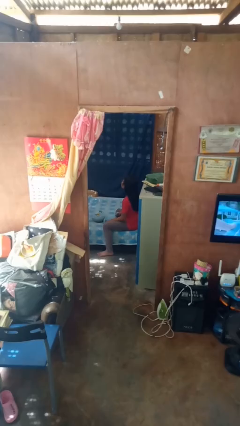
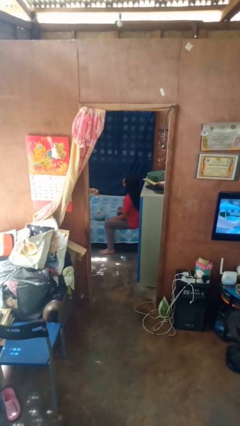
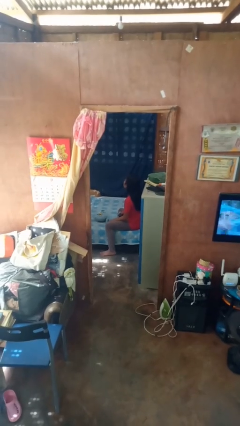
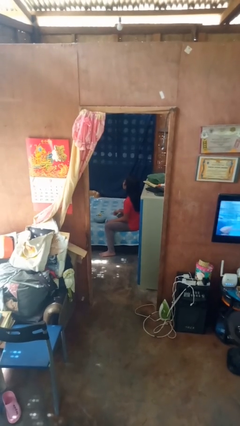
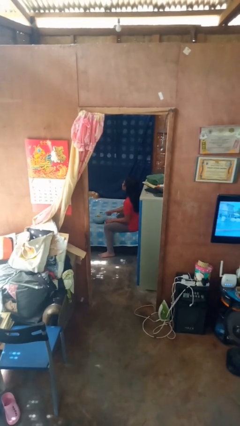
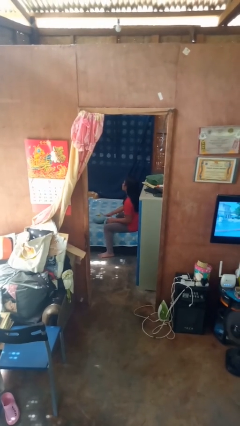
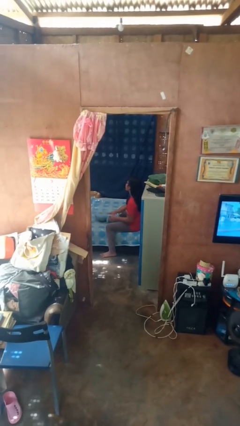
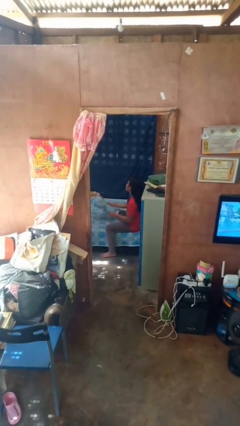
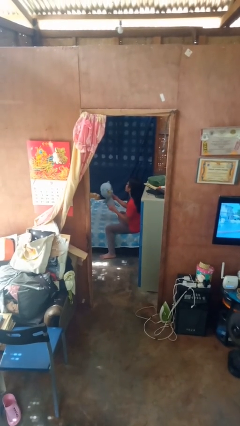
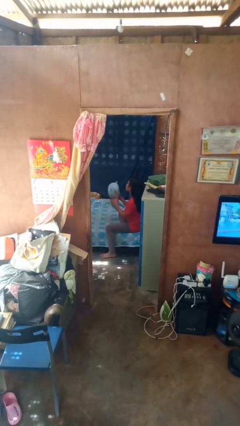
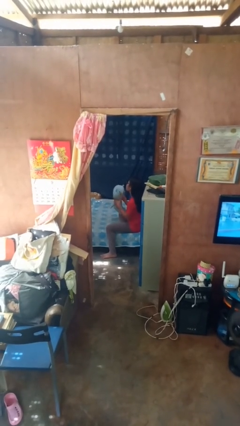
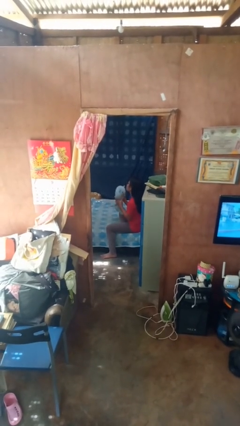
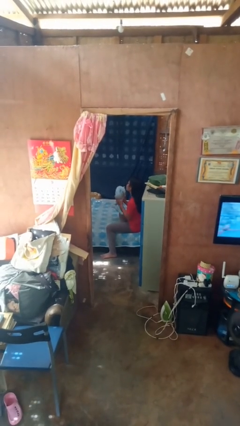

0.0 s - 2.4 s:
person picks up object from bed

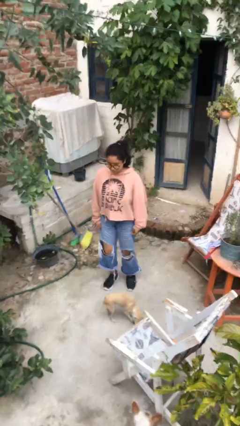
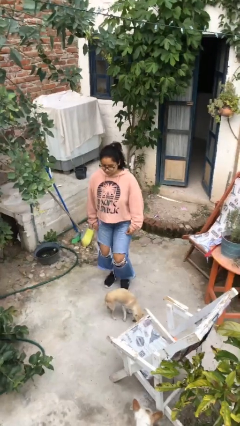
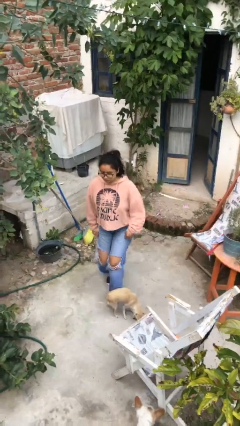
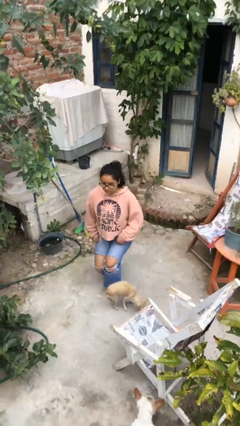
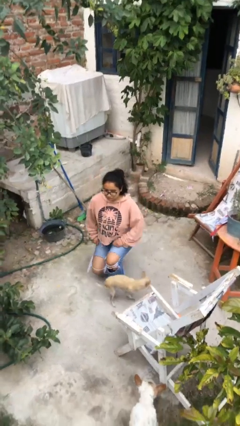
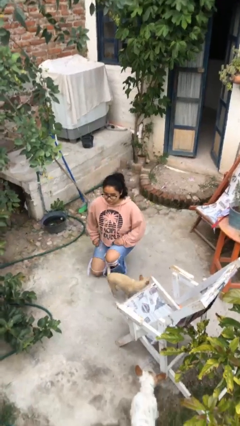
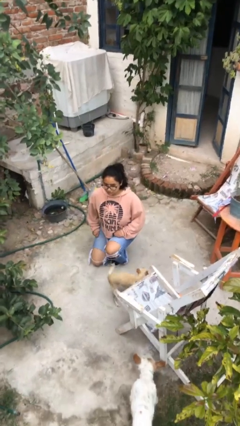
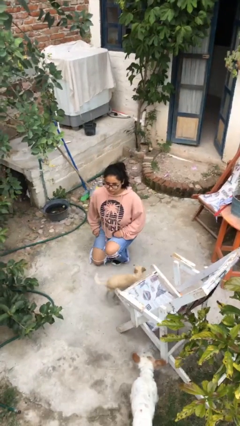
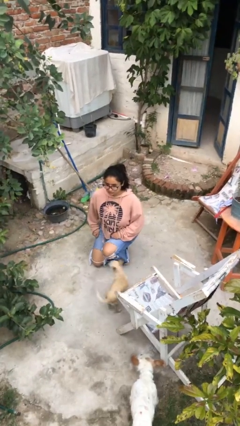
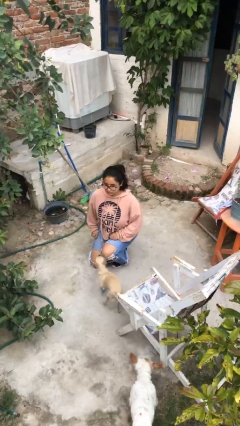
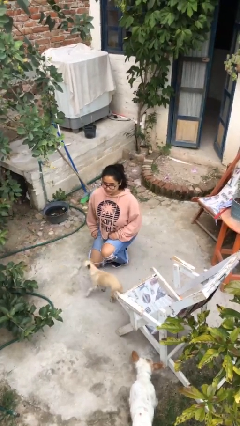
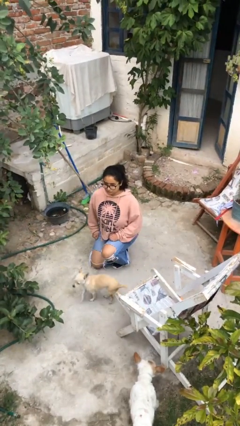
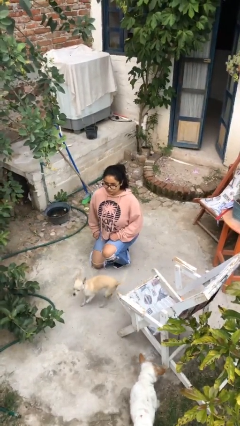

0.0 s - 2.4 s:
person kneels

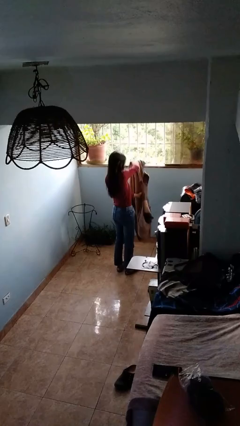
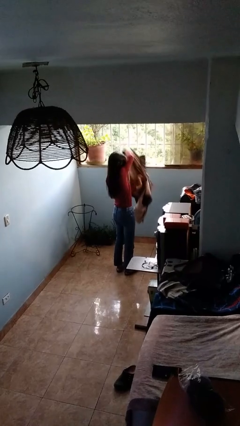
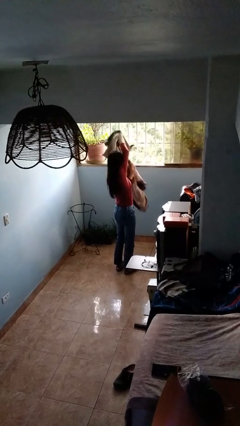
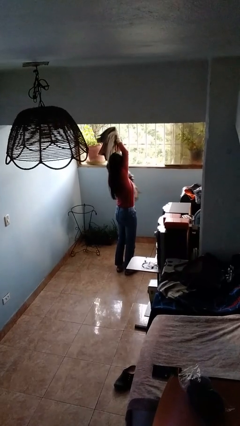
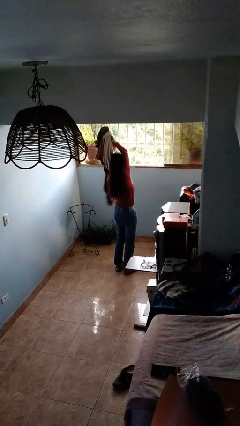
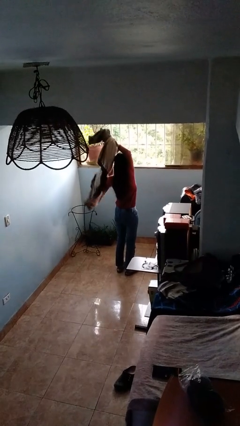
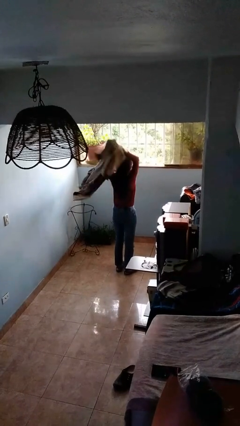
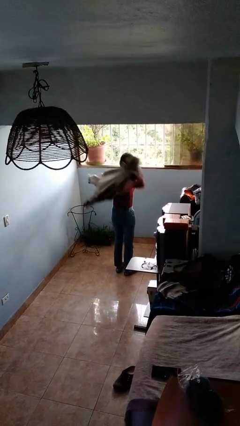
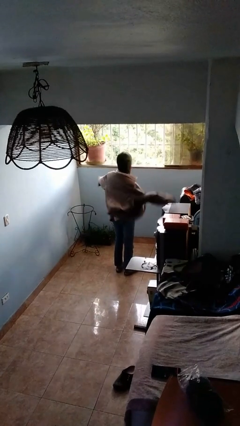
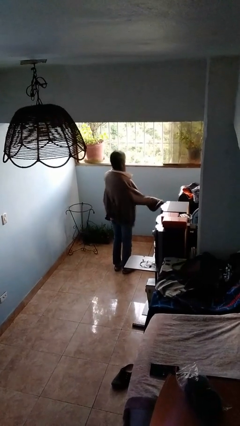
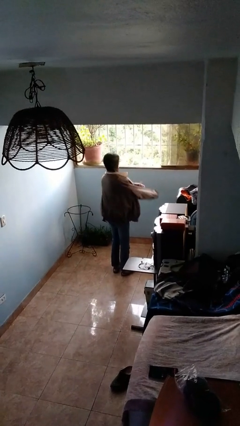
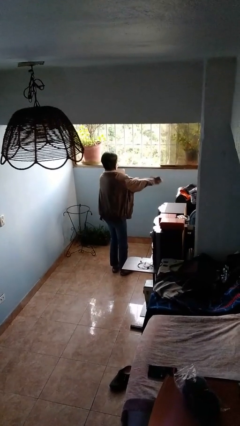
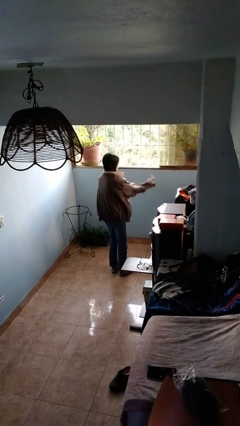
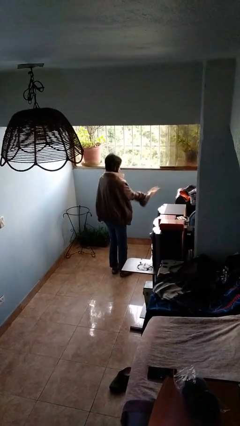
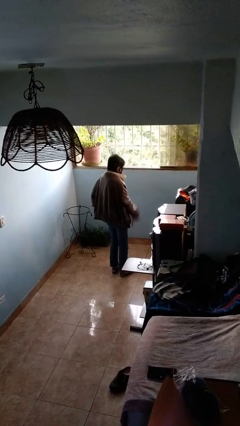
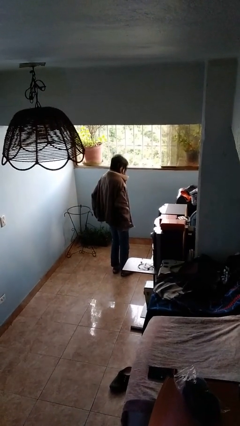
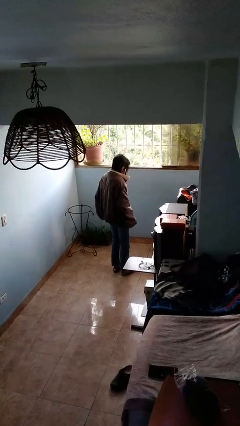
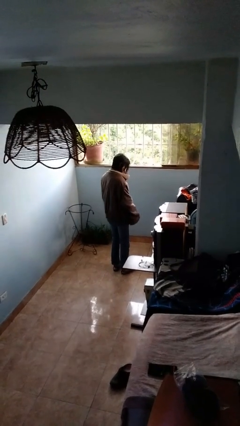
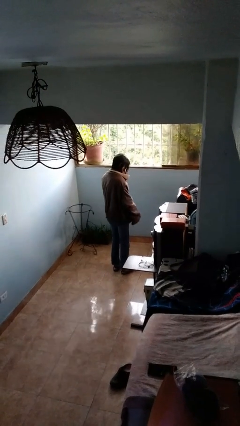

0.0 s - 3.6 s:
person puts on jacket

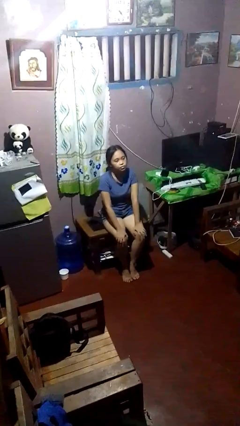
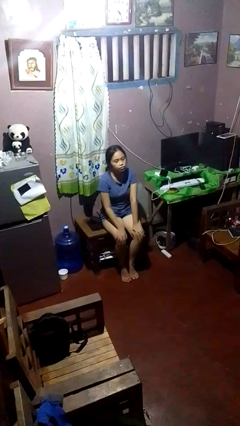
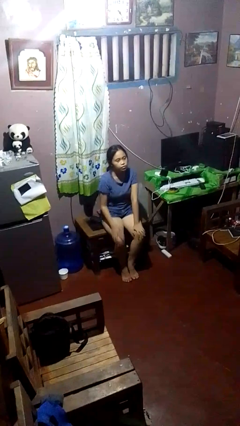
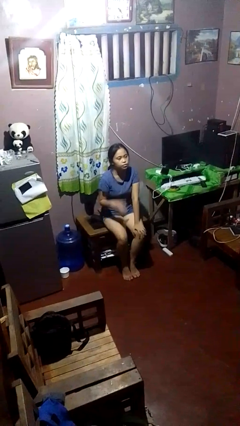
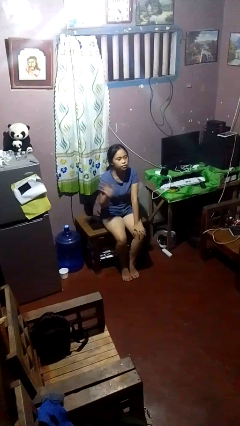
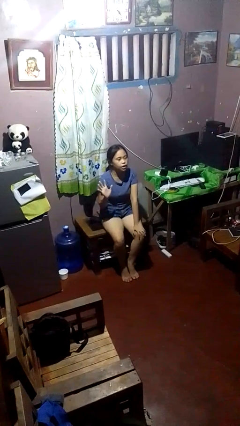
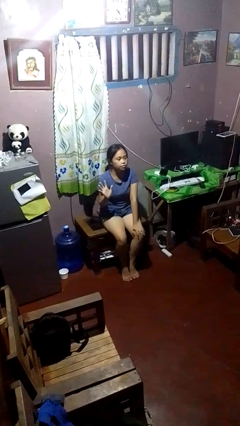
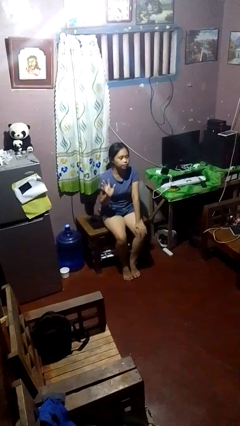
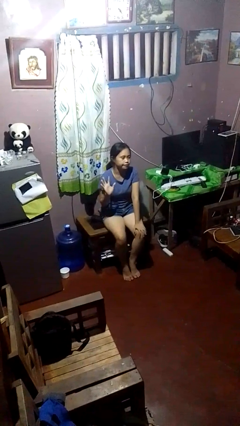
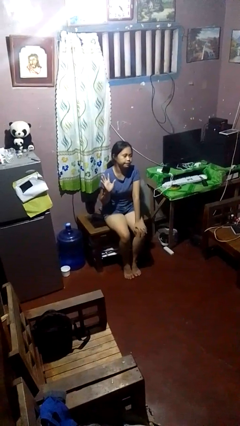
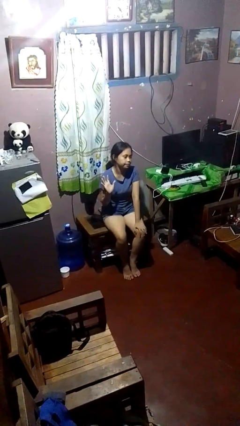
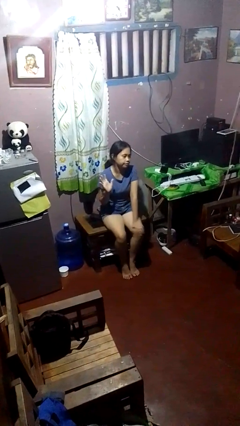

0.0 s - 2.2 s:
person gestures number five

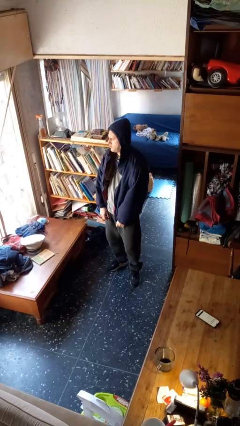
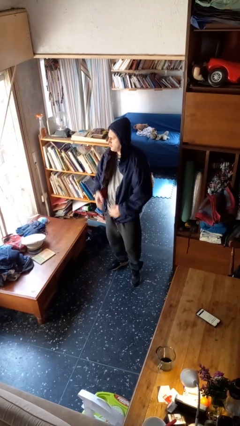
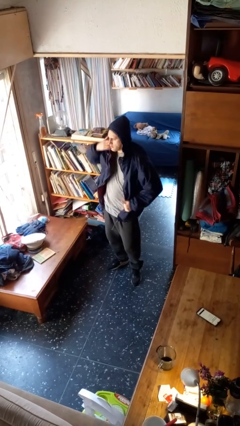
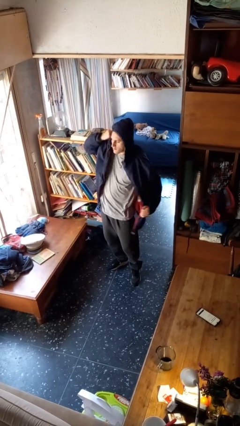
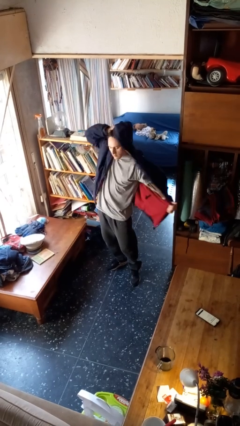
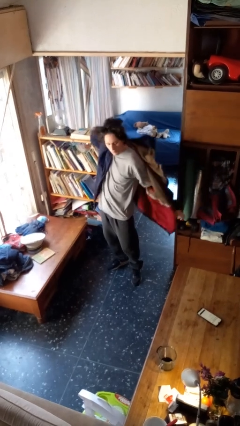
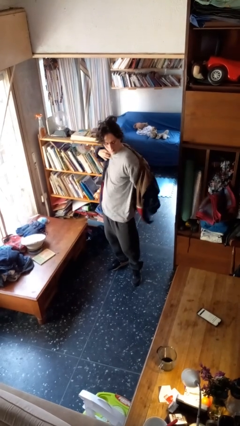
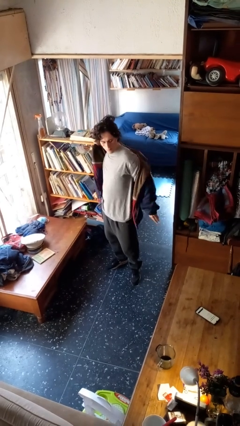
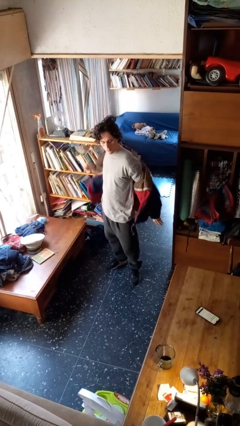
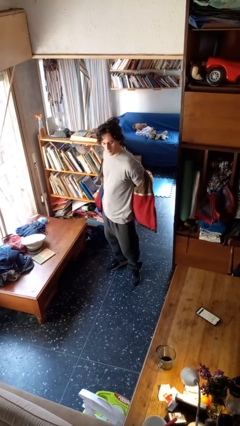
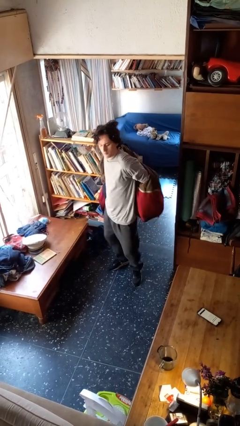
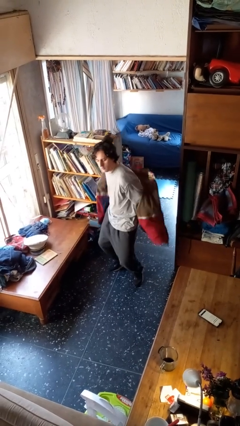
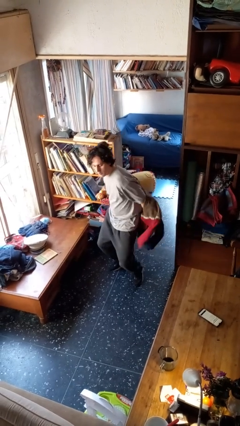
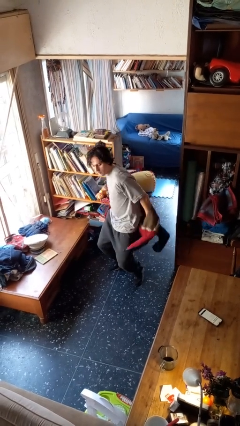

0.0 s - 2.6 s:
person takes off hoodie

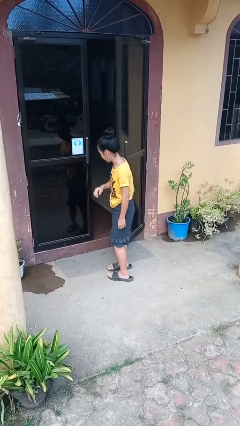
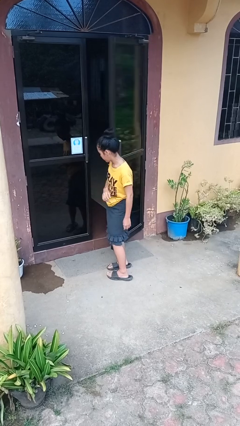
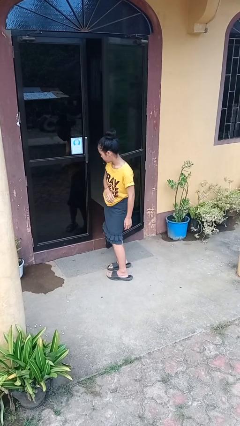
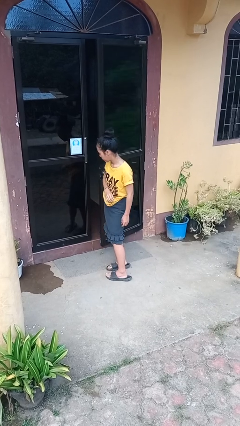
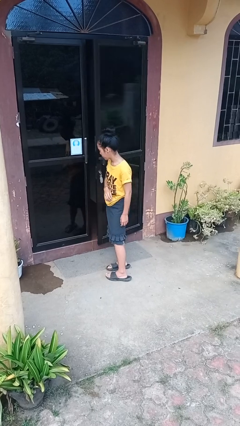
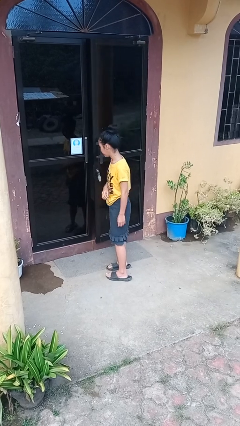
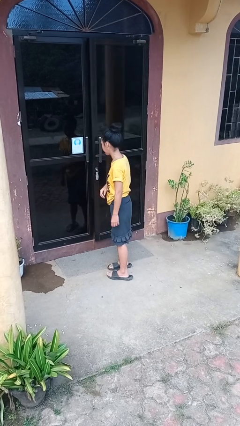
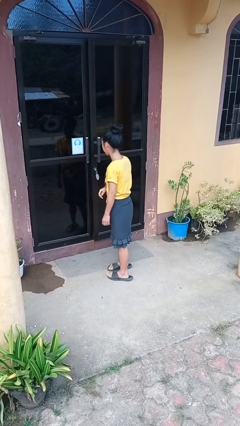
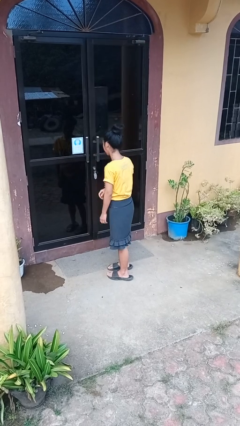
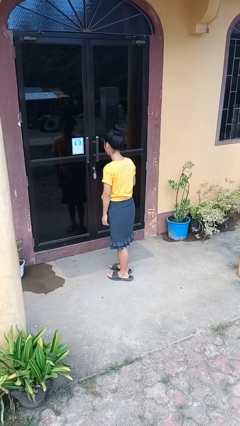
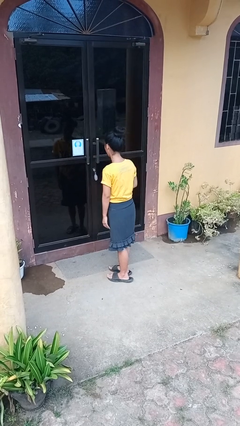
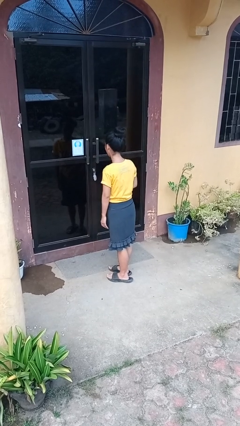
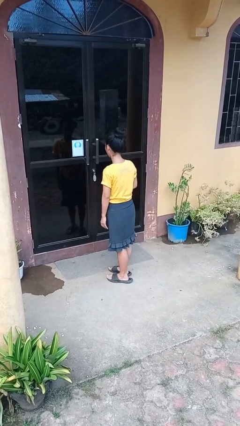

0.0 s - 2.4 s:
person closes door with hip

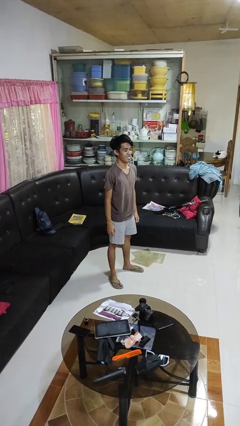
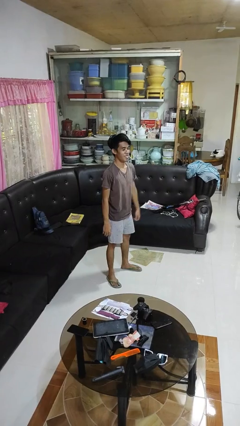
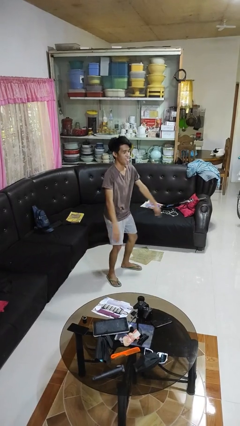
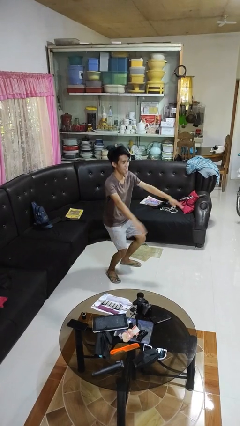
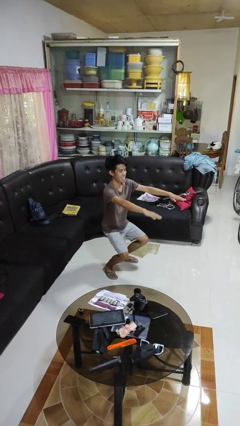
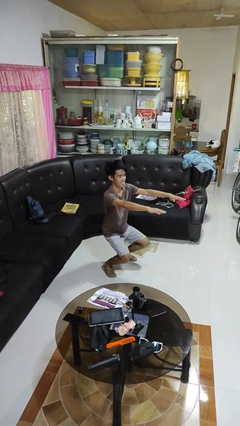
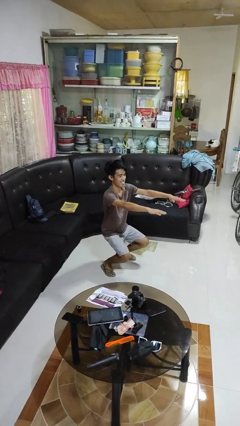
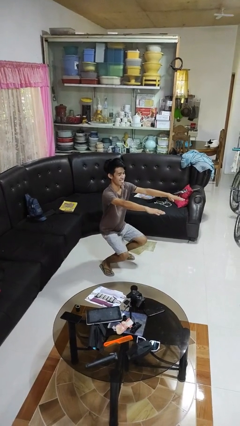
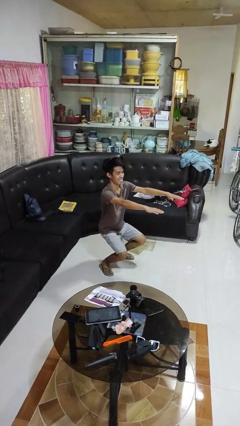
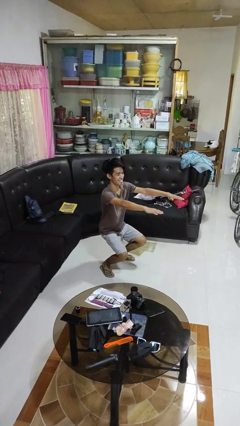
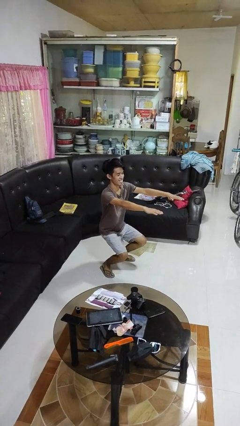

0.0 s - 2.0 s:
person squats
